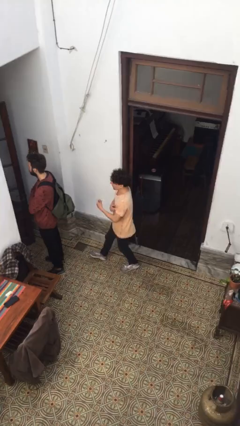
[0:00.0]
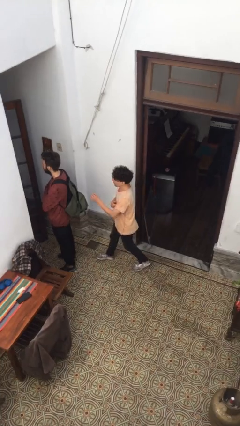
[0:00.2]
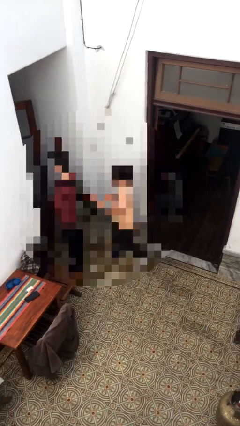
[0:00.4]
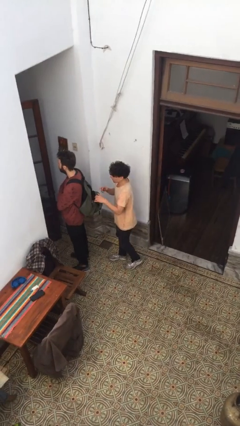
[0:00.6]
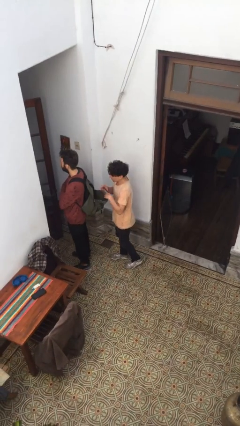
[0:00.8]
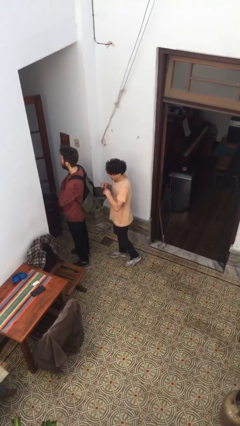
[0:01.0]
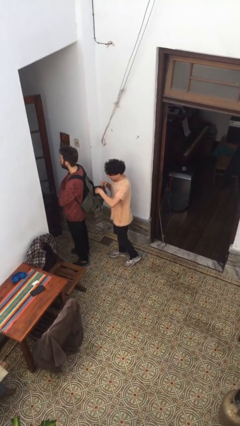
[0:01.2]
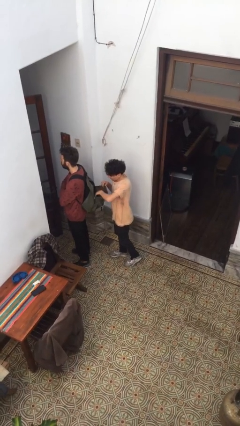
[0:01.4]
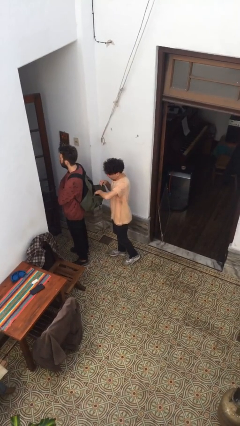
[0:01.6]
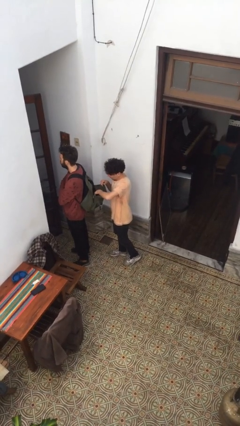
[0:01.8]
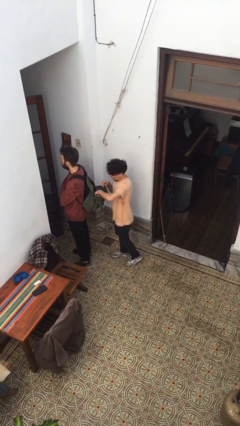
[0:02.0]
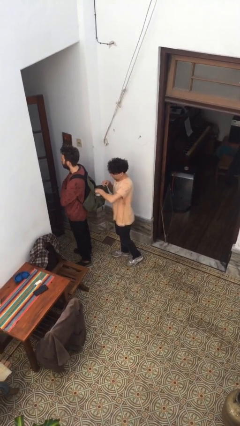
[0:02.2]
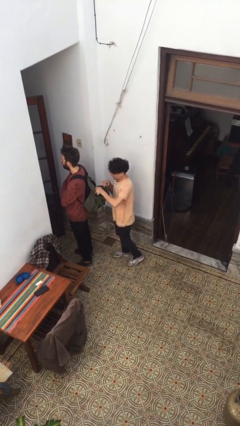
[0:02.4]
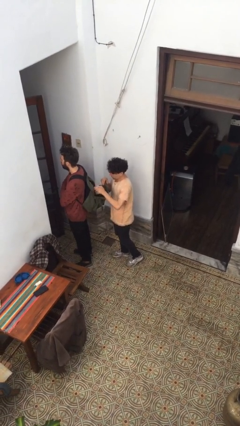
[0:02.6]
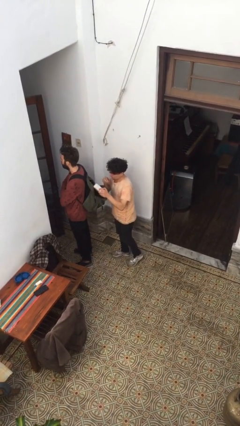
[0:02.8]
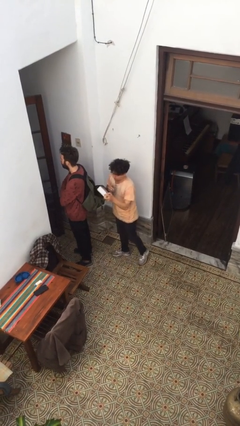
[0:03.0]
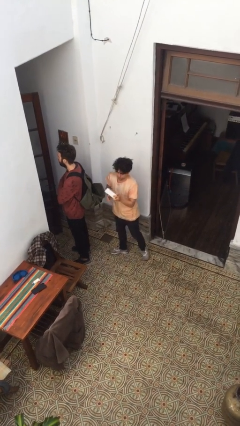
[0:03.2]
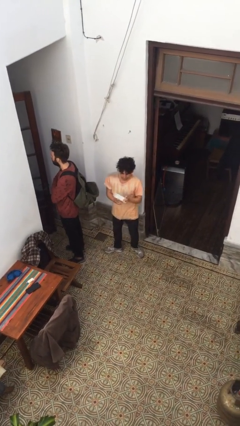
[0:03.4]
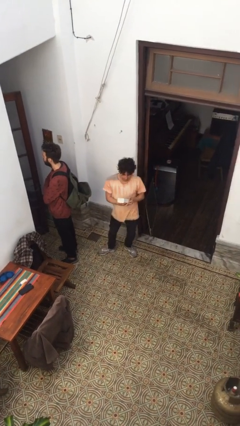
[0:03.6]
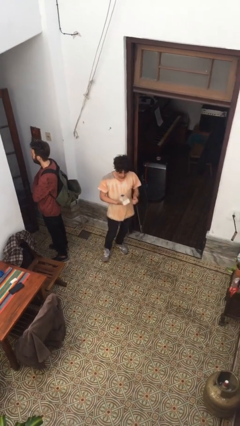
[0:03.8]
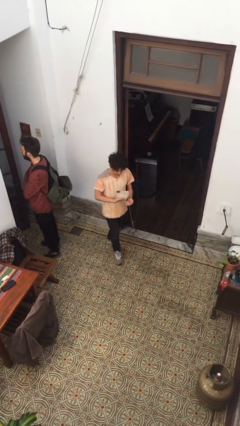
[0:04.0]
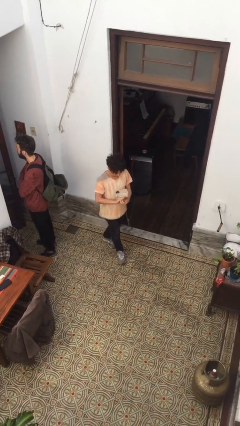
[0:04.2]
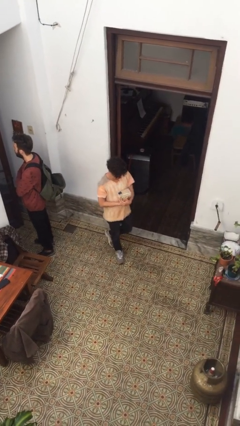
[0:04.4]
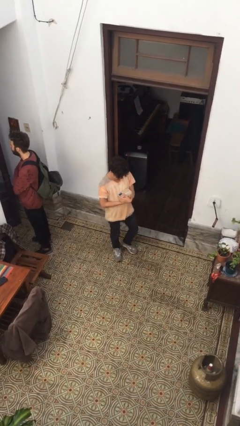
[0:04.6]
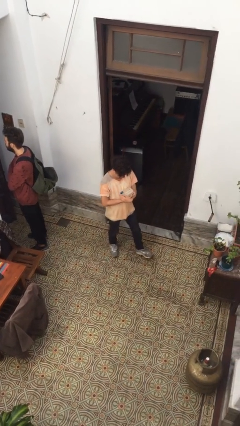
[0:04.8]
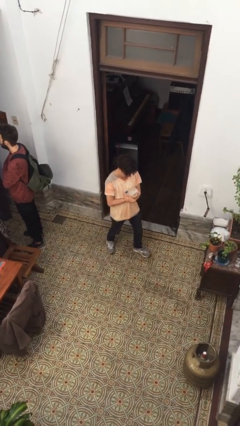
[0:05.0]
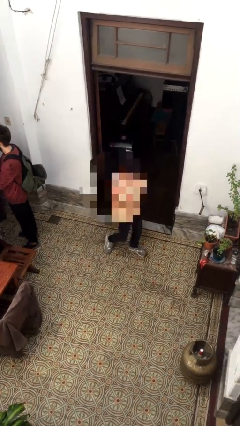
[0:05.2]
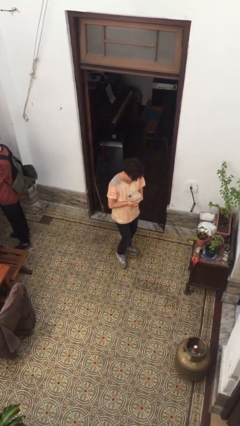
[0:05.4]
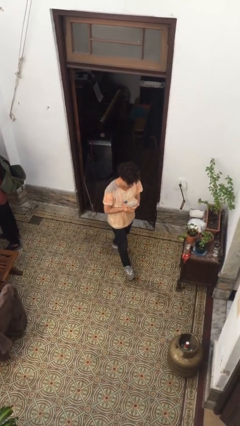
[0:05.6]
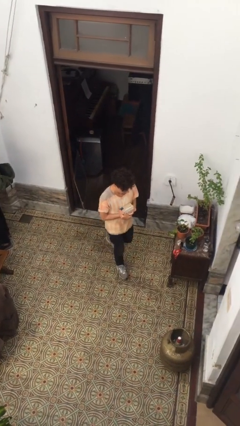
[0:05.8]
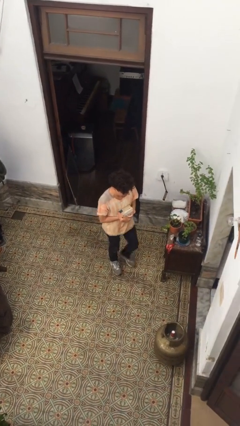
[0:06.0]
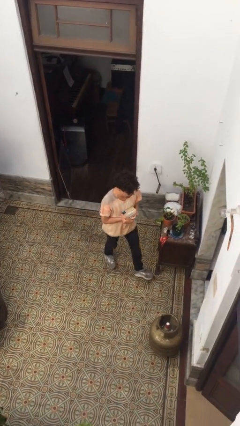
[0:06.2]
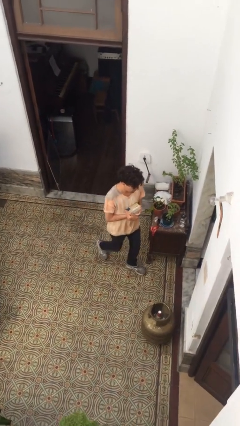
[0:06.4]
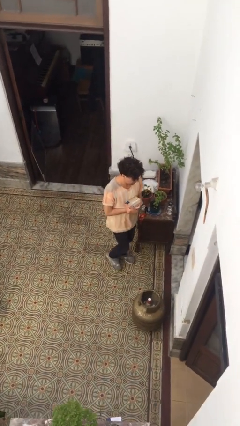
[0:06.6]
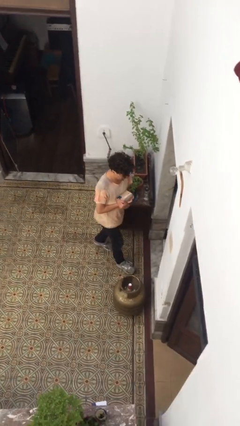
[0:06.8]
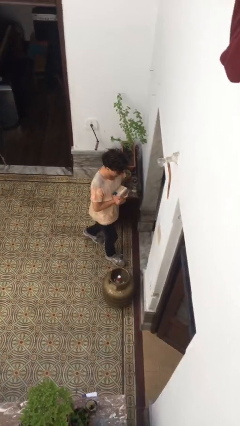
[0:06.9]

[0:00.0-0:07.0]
person steals object from person

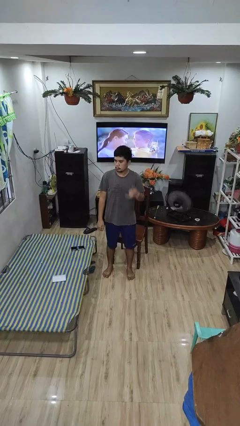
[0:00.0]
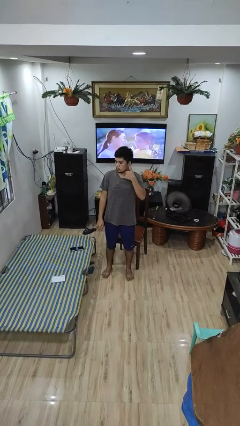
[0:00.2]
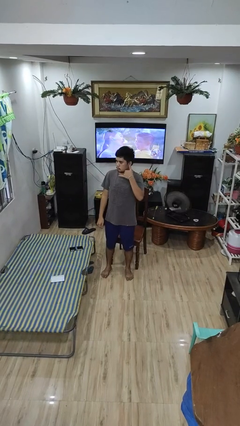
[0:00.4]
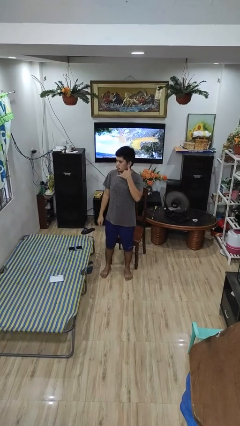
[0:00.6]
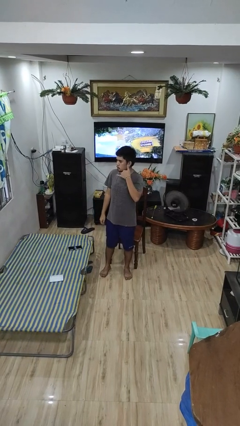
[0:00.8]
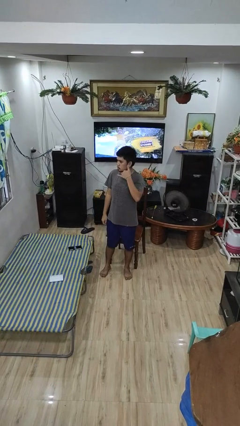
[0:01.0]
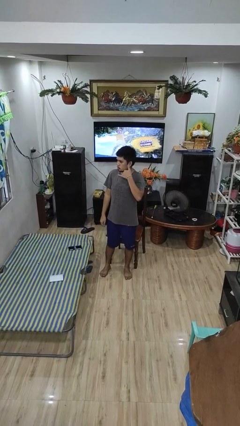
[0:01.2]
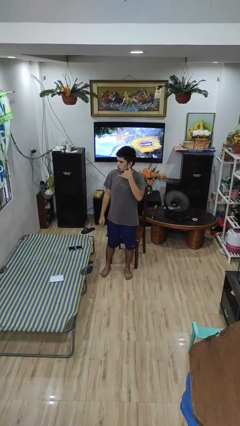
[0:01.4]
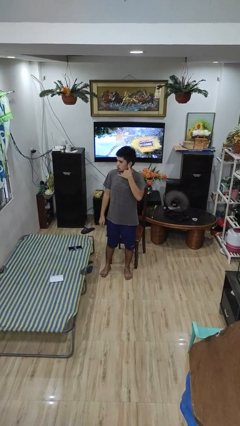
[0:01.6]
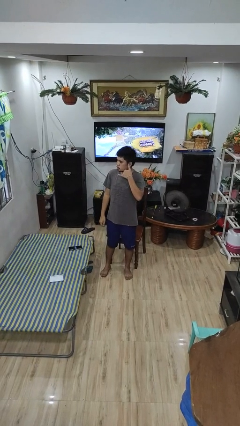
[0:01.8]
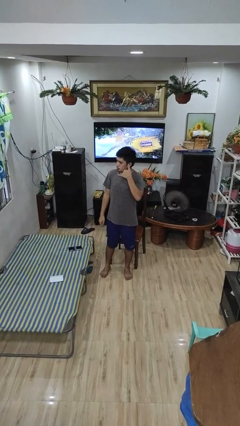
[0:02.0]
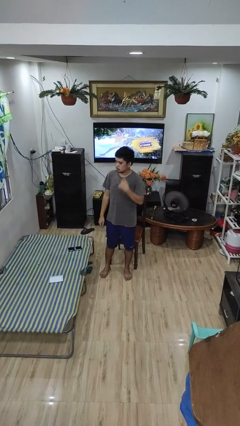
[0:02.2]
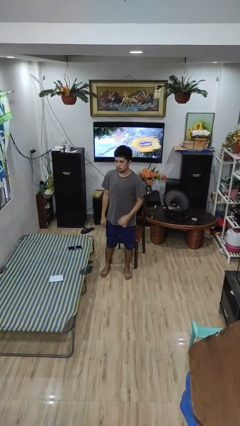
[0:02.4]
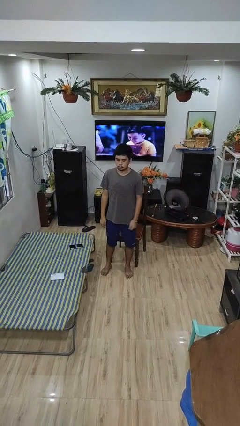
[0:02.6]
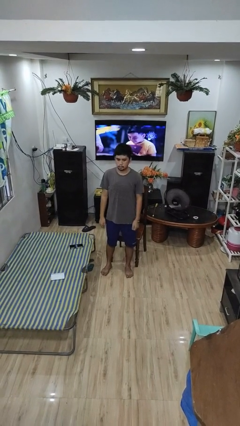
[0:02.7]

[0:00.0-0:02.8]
person gestures call me

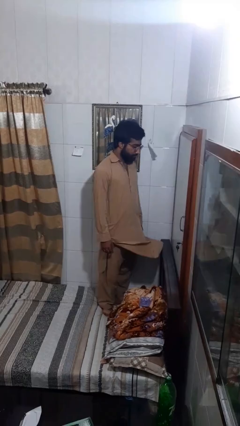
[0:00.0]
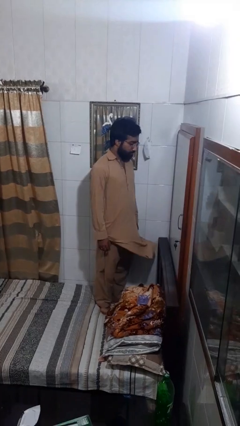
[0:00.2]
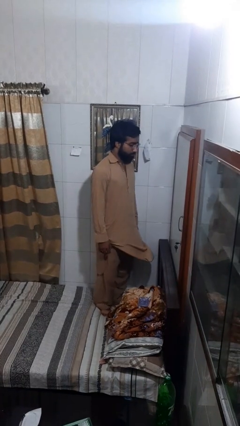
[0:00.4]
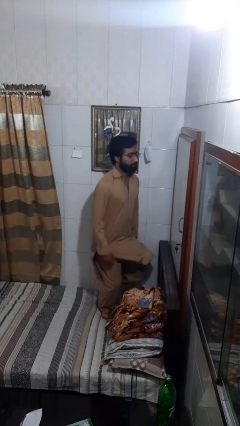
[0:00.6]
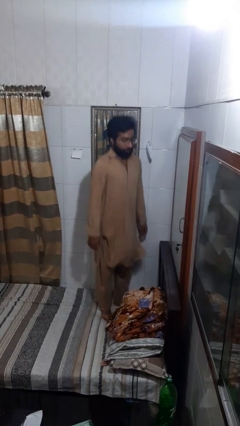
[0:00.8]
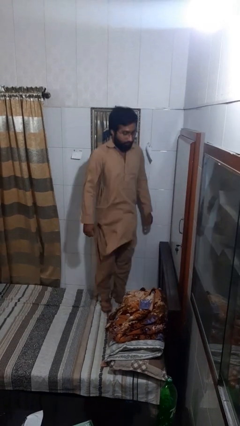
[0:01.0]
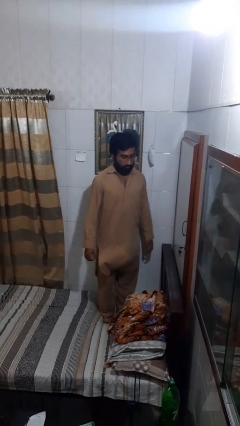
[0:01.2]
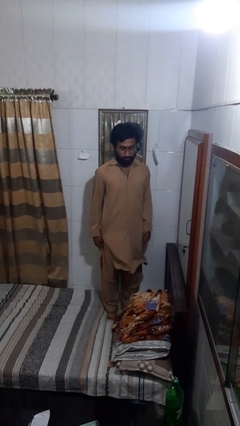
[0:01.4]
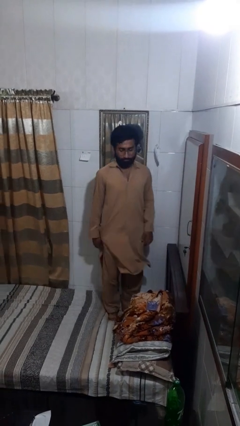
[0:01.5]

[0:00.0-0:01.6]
person jumps on bed

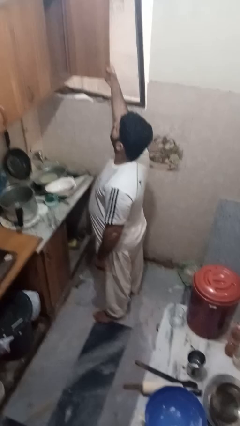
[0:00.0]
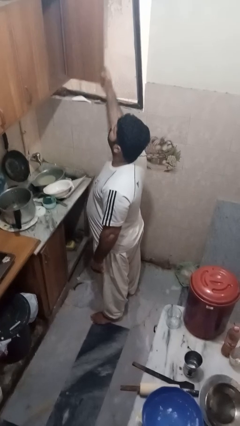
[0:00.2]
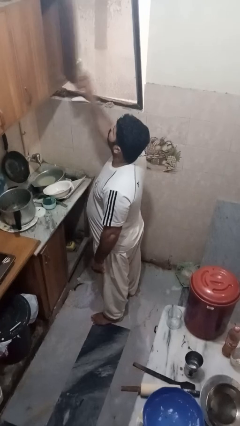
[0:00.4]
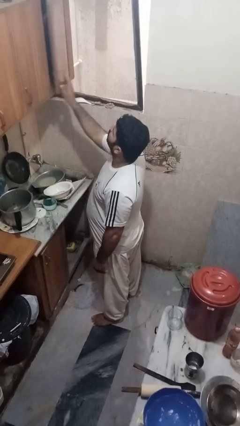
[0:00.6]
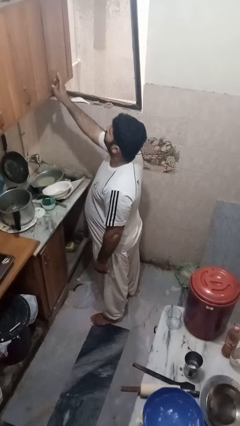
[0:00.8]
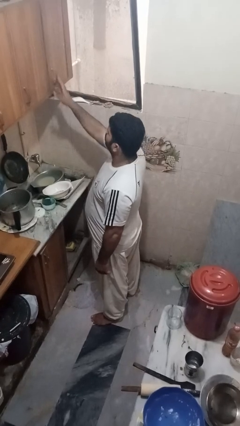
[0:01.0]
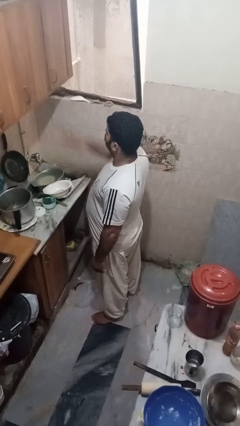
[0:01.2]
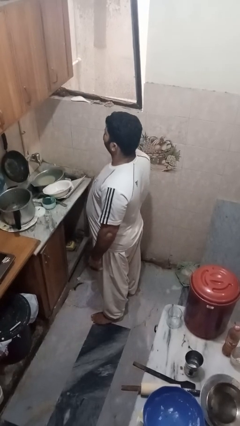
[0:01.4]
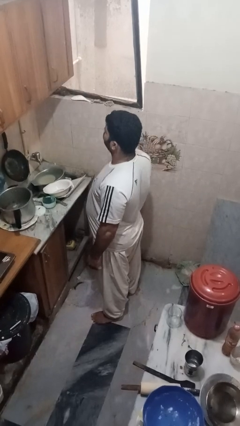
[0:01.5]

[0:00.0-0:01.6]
person closes cabinet

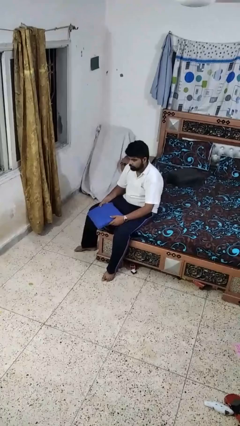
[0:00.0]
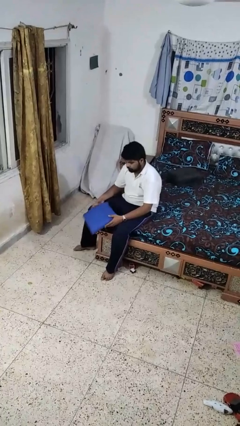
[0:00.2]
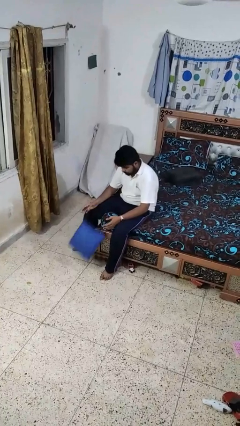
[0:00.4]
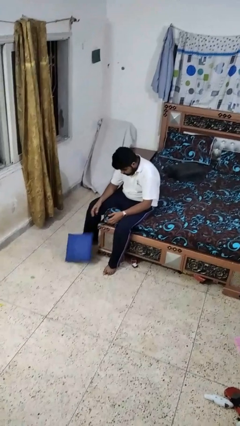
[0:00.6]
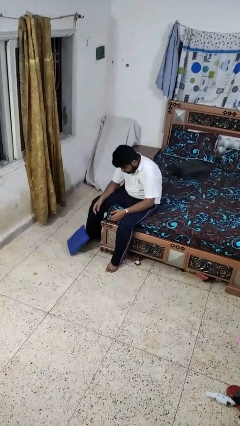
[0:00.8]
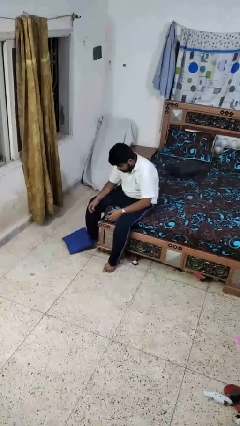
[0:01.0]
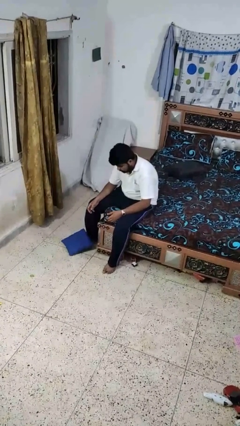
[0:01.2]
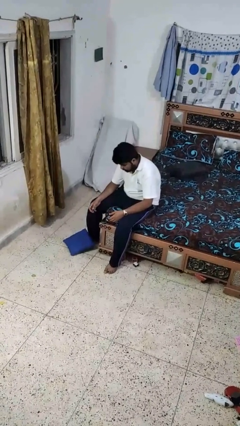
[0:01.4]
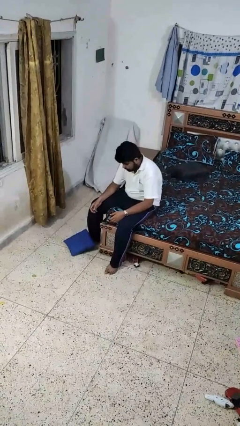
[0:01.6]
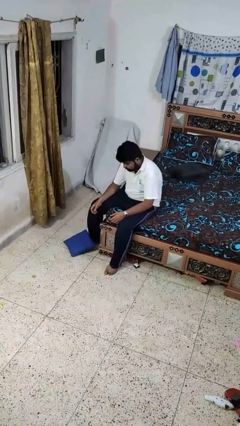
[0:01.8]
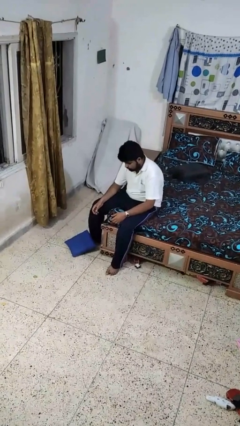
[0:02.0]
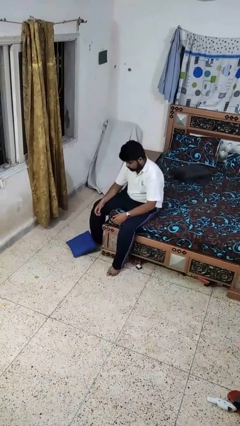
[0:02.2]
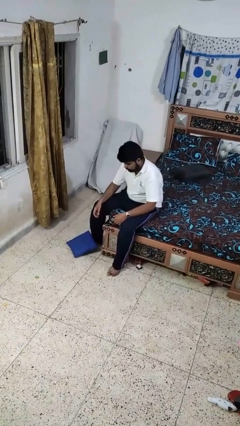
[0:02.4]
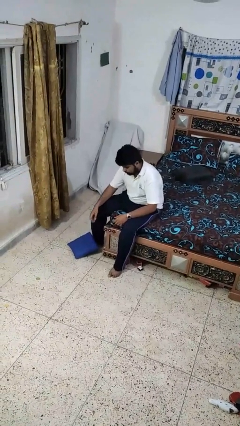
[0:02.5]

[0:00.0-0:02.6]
person drops object

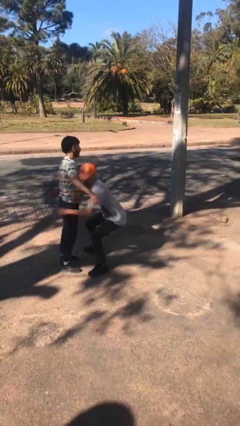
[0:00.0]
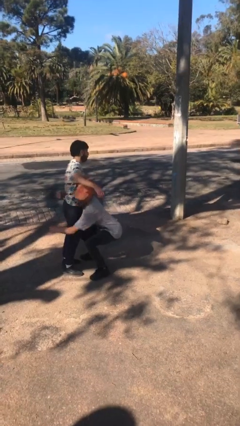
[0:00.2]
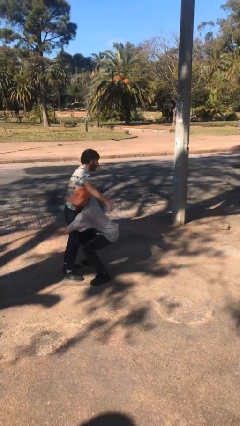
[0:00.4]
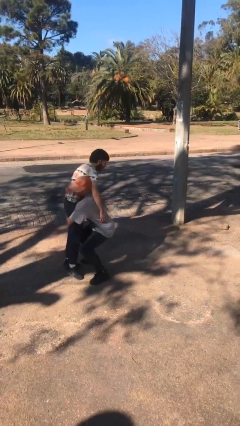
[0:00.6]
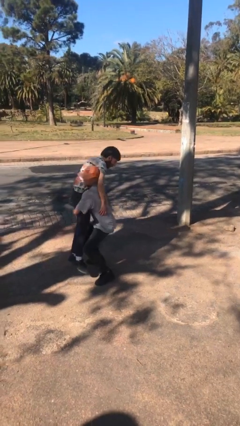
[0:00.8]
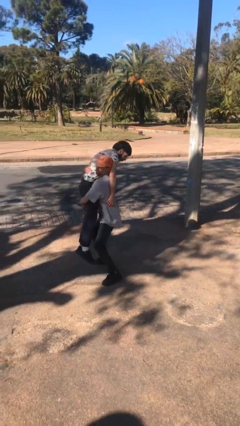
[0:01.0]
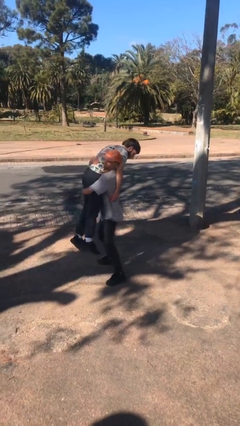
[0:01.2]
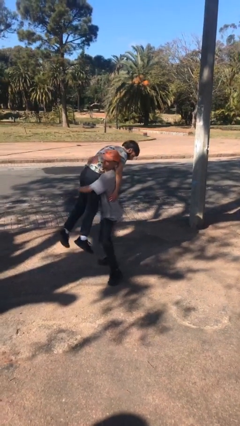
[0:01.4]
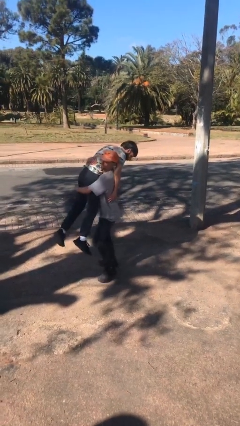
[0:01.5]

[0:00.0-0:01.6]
person carries person over shoulder
